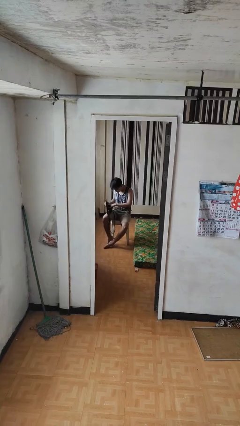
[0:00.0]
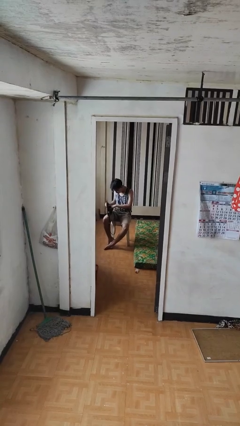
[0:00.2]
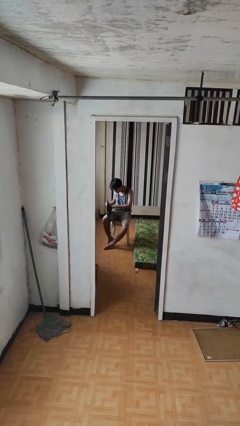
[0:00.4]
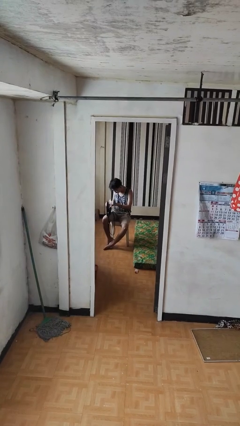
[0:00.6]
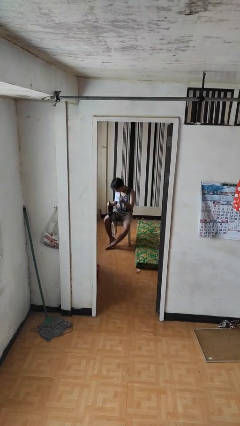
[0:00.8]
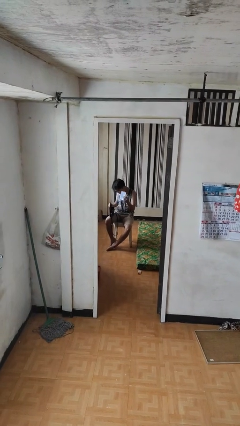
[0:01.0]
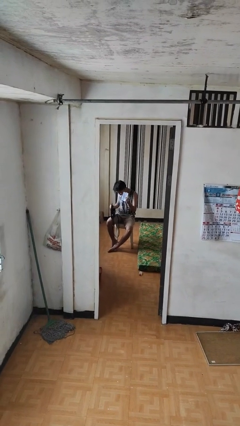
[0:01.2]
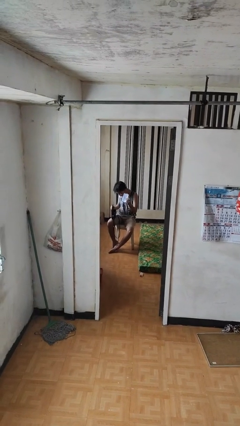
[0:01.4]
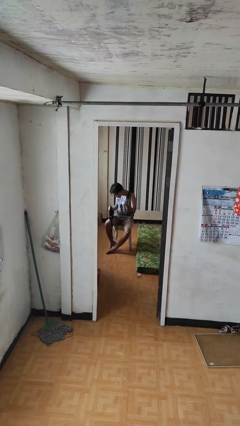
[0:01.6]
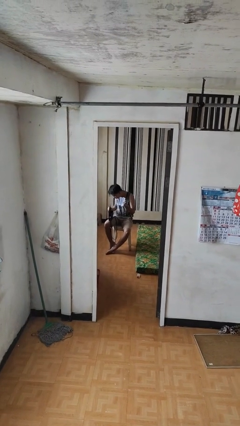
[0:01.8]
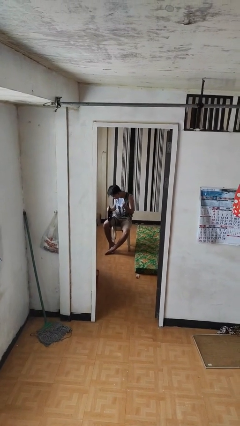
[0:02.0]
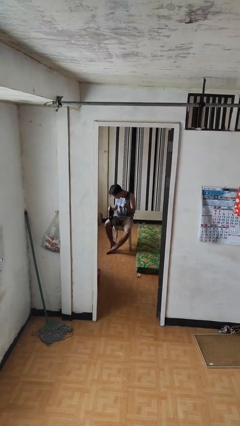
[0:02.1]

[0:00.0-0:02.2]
person takes object from purse

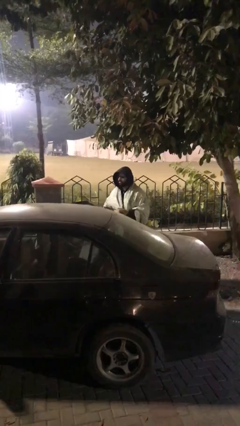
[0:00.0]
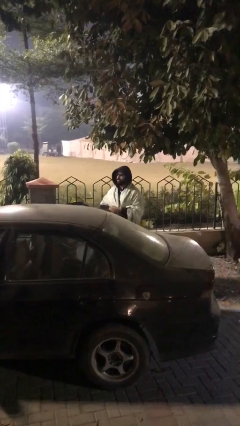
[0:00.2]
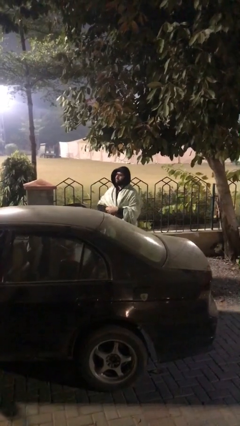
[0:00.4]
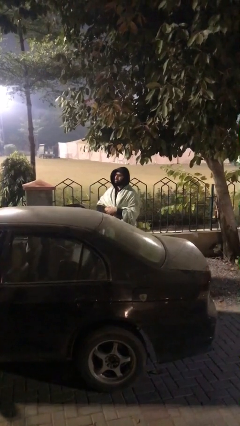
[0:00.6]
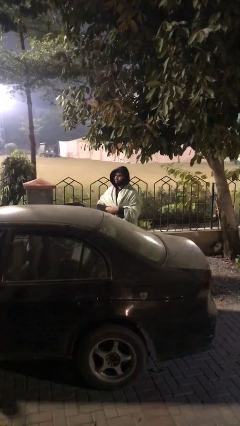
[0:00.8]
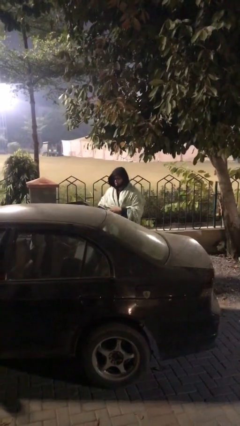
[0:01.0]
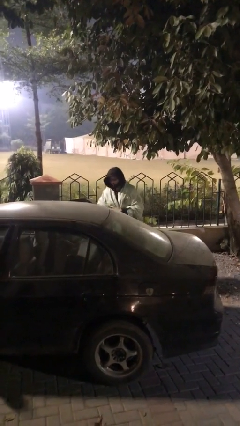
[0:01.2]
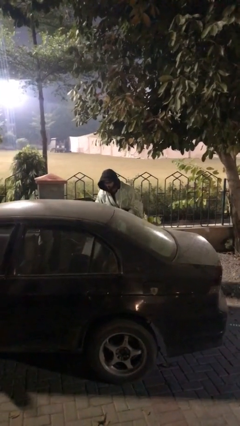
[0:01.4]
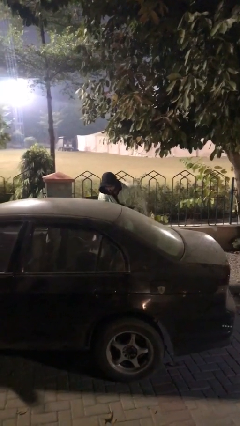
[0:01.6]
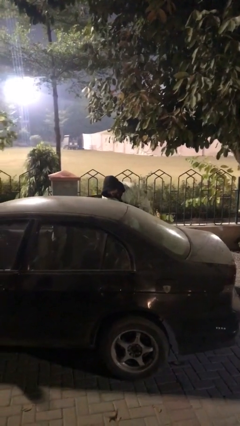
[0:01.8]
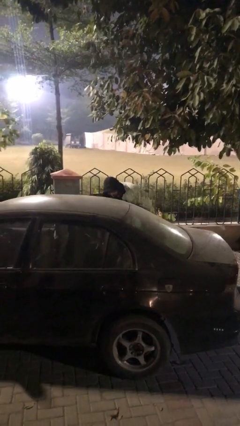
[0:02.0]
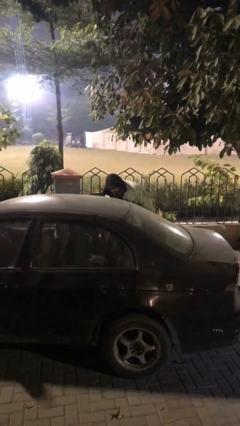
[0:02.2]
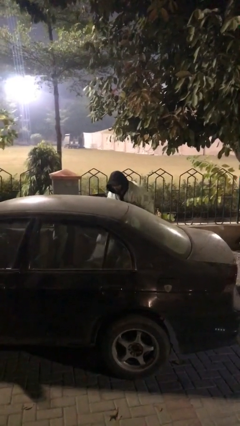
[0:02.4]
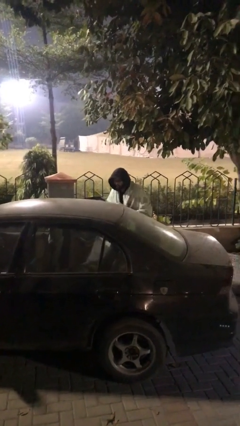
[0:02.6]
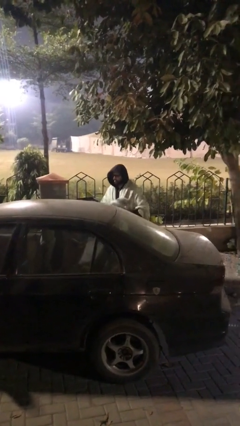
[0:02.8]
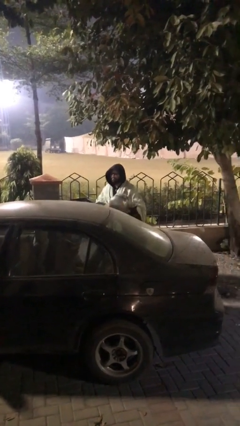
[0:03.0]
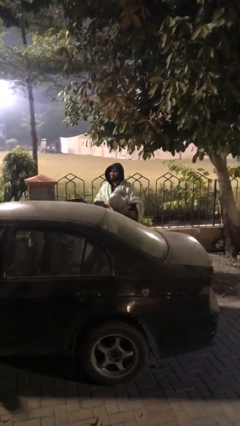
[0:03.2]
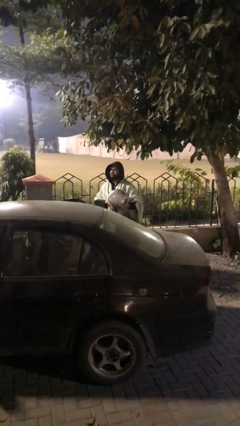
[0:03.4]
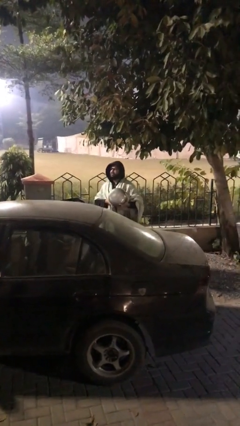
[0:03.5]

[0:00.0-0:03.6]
person unloads car

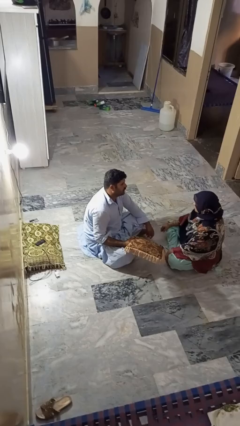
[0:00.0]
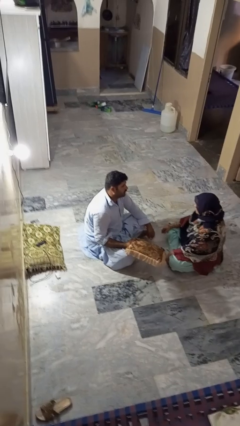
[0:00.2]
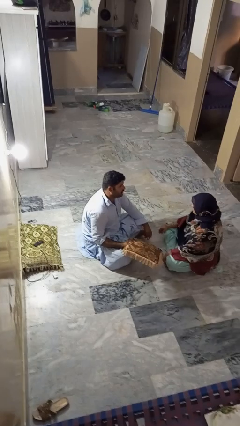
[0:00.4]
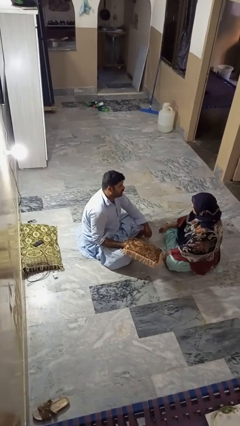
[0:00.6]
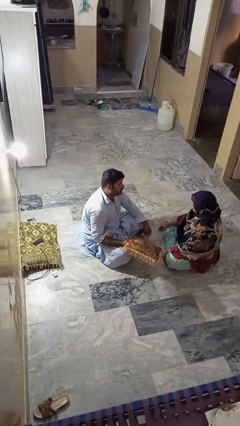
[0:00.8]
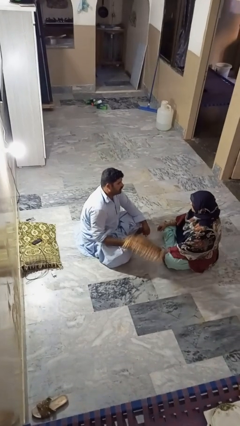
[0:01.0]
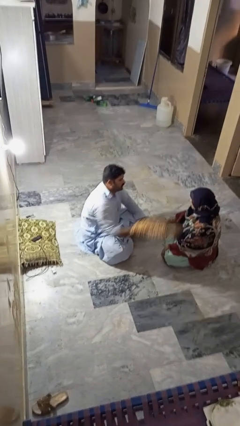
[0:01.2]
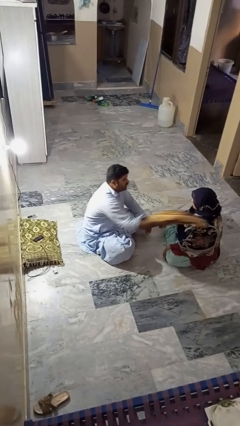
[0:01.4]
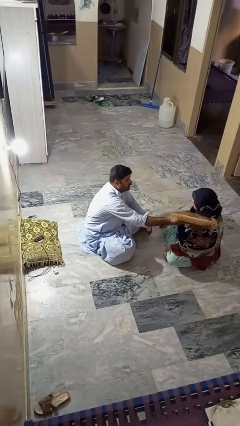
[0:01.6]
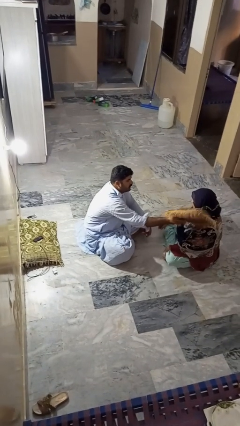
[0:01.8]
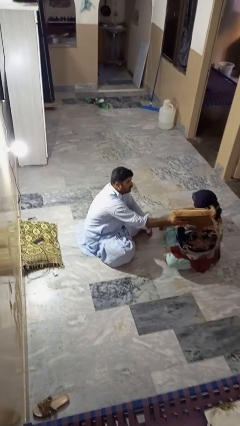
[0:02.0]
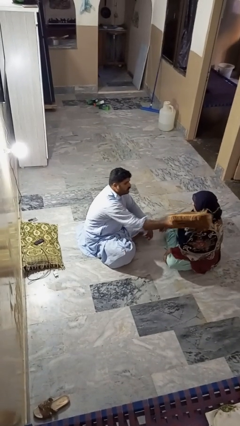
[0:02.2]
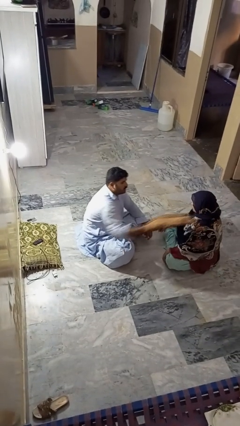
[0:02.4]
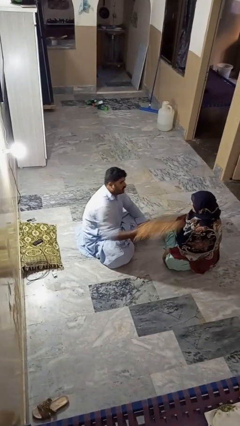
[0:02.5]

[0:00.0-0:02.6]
person hits person with pillow

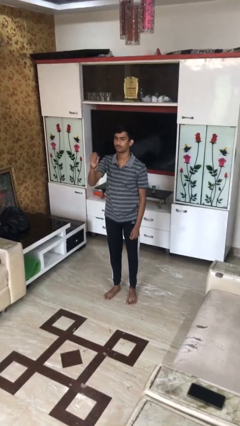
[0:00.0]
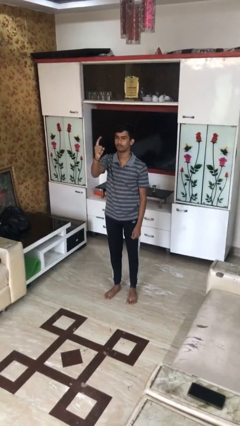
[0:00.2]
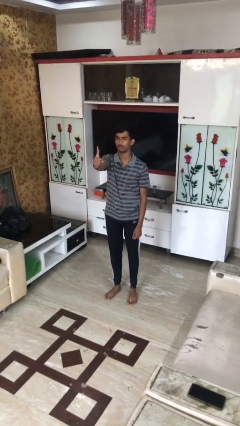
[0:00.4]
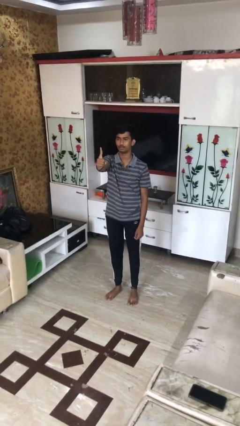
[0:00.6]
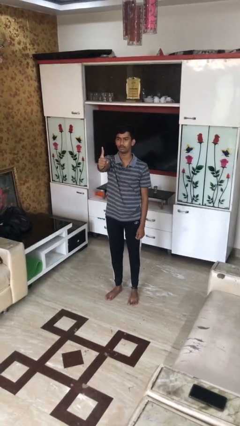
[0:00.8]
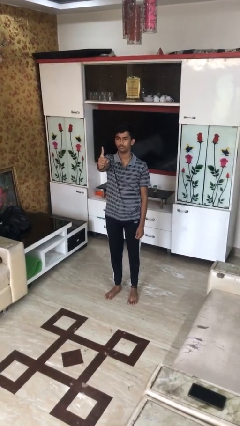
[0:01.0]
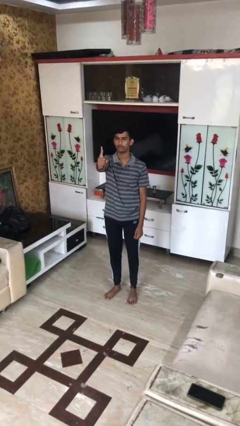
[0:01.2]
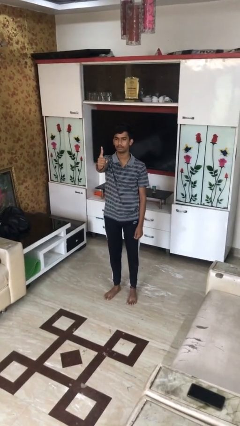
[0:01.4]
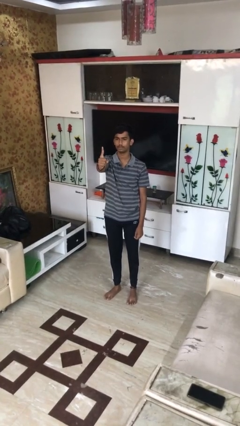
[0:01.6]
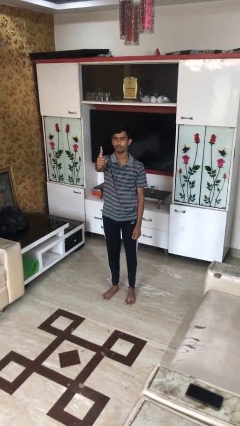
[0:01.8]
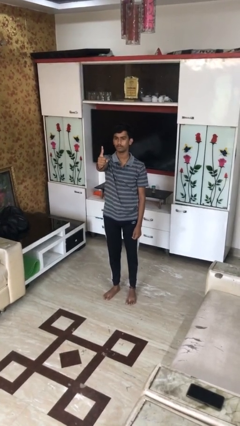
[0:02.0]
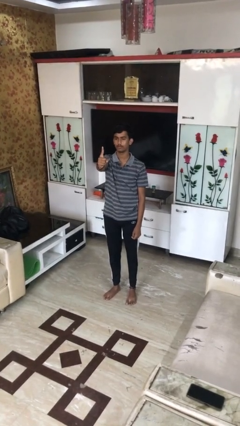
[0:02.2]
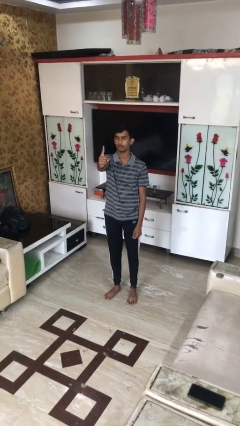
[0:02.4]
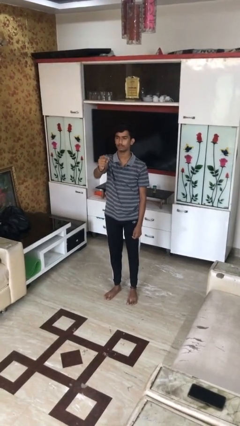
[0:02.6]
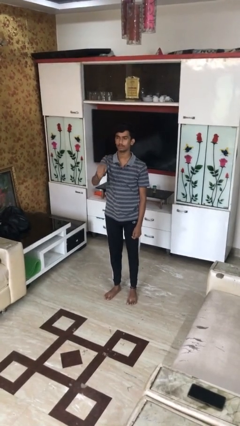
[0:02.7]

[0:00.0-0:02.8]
person gestures number one

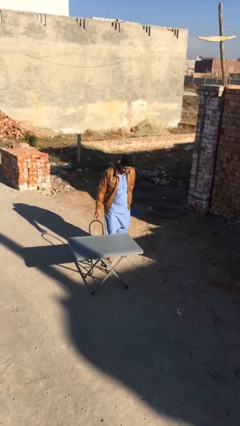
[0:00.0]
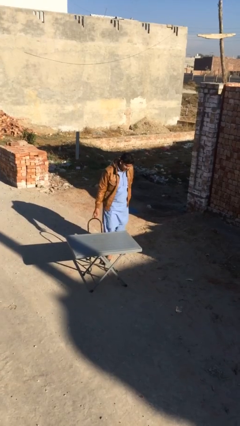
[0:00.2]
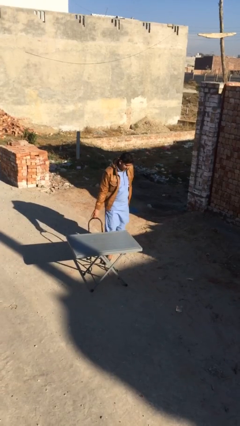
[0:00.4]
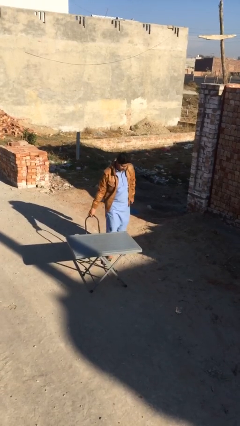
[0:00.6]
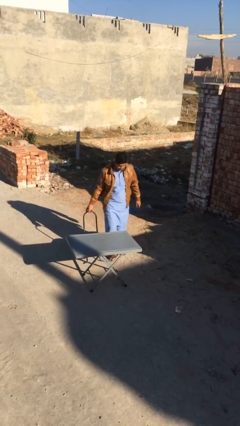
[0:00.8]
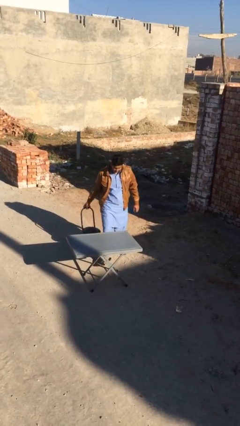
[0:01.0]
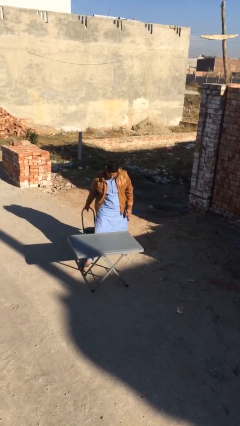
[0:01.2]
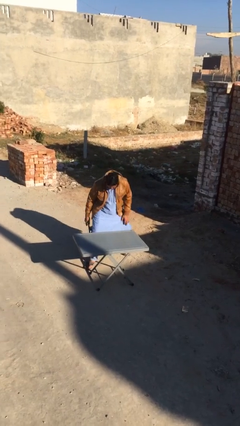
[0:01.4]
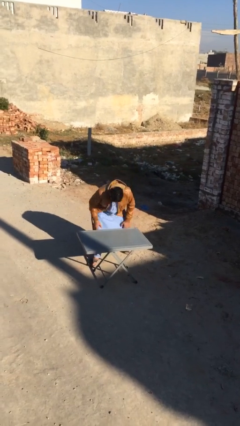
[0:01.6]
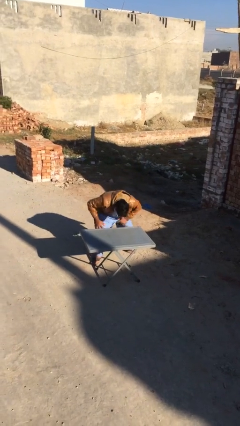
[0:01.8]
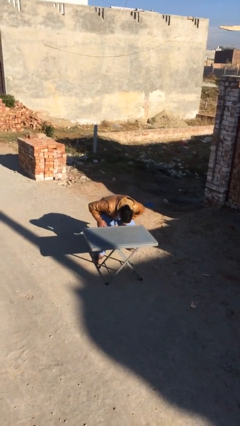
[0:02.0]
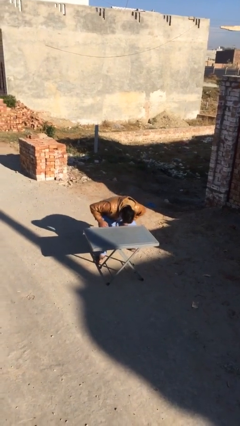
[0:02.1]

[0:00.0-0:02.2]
person sits down

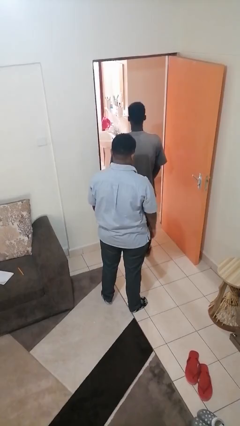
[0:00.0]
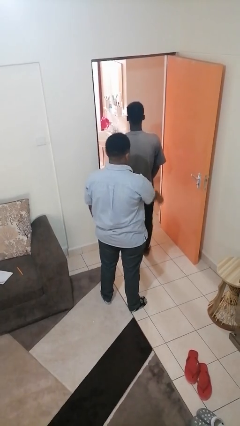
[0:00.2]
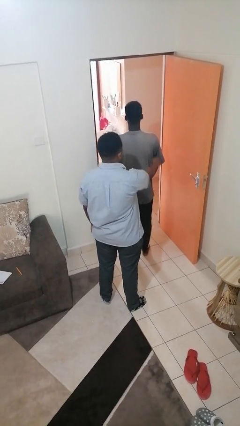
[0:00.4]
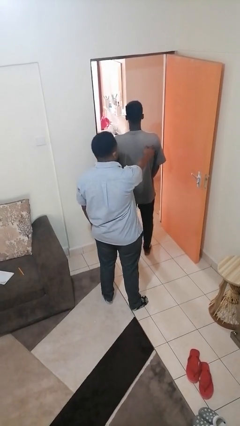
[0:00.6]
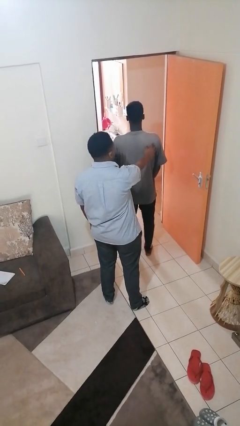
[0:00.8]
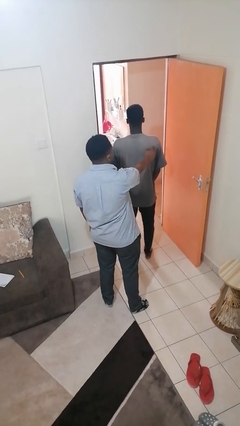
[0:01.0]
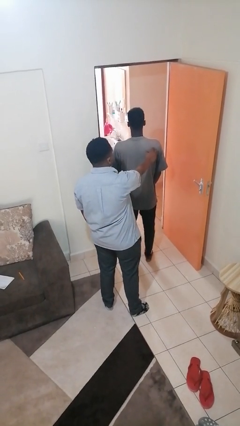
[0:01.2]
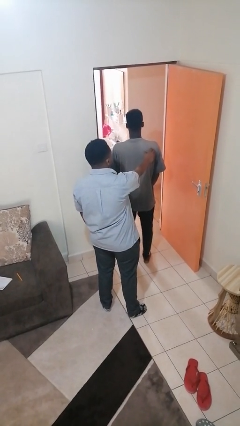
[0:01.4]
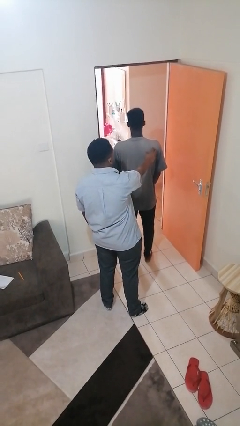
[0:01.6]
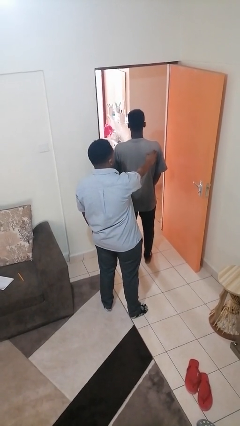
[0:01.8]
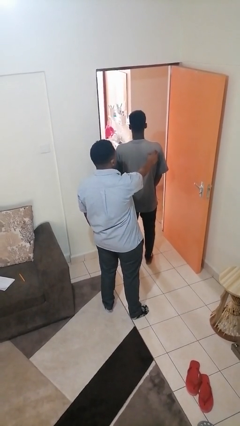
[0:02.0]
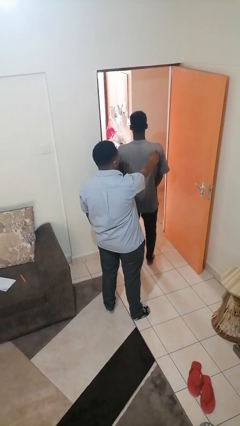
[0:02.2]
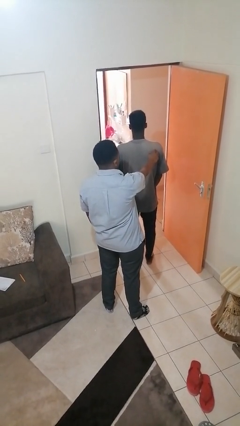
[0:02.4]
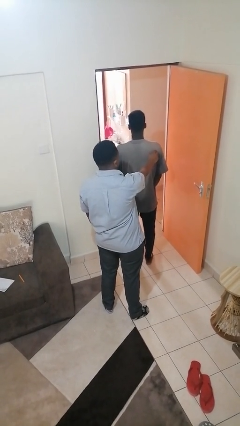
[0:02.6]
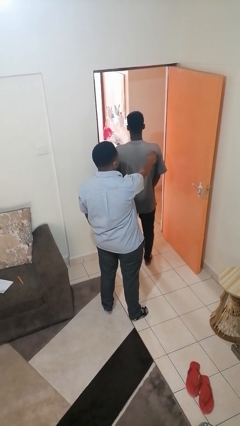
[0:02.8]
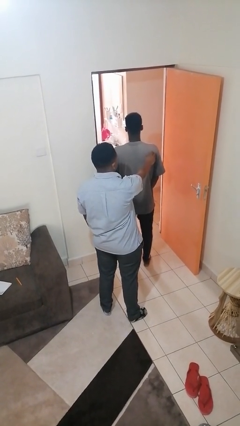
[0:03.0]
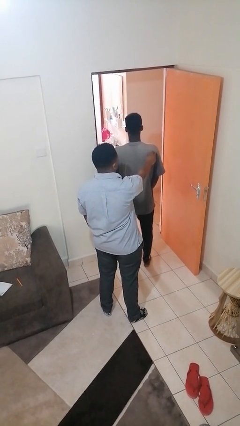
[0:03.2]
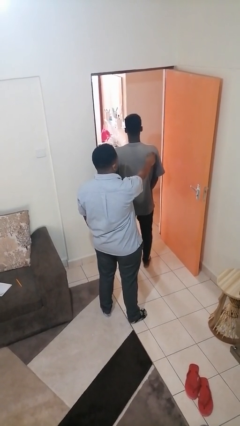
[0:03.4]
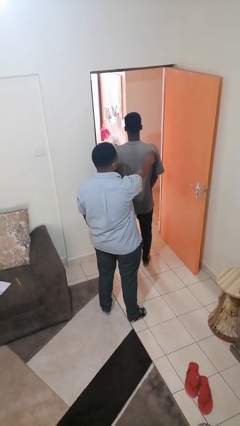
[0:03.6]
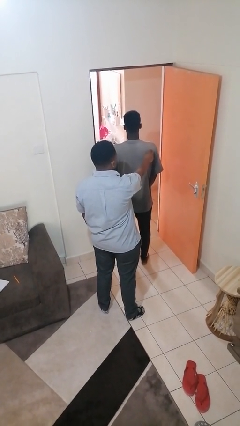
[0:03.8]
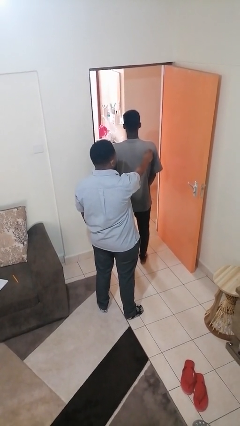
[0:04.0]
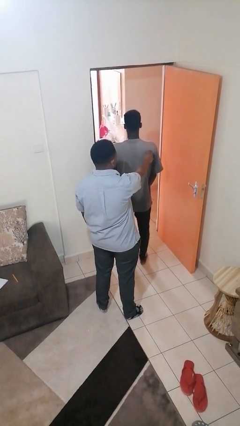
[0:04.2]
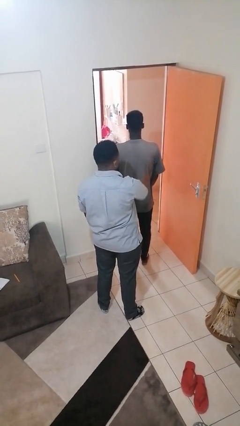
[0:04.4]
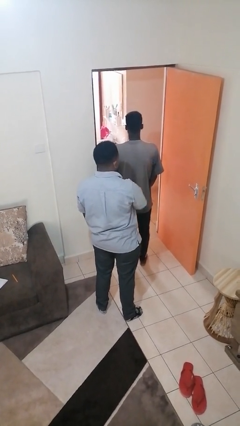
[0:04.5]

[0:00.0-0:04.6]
person touches back of person
